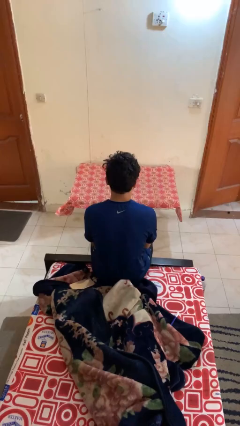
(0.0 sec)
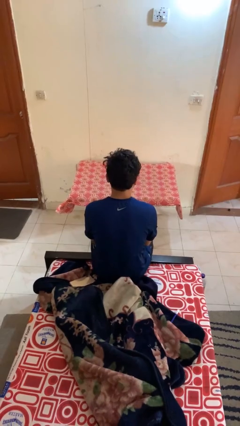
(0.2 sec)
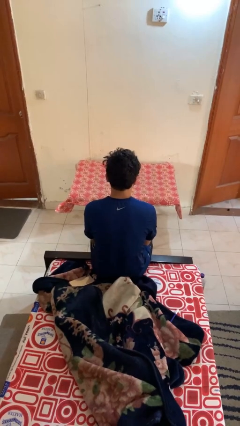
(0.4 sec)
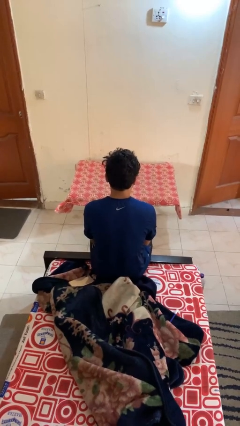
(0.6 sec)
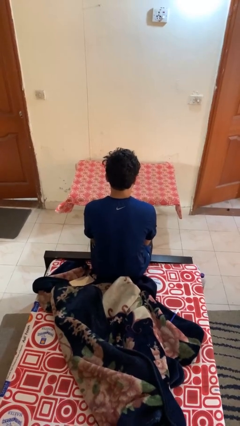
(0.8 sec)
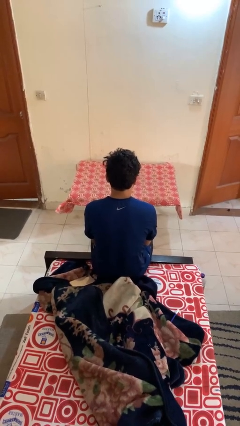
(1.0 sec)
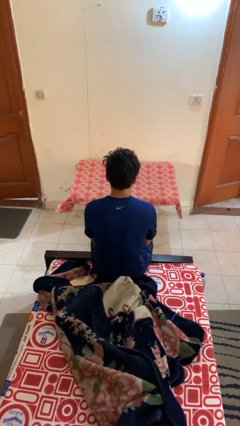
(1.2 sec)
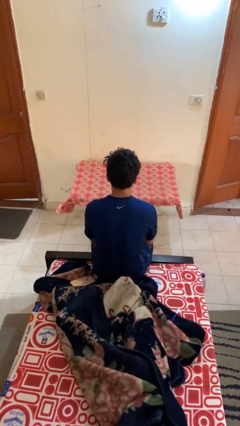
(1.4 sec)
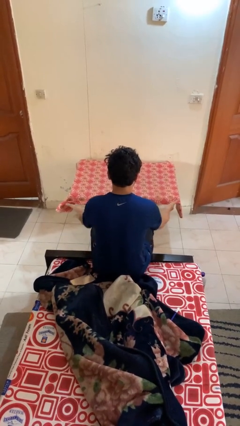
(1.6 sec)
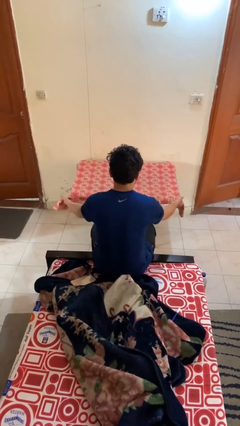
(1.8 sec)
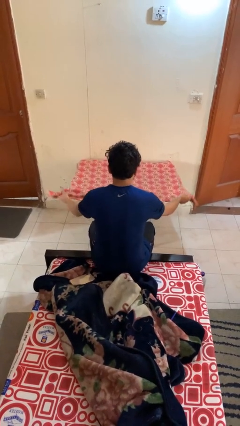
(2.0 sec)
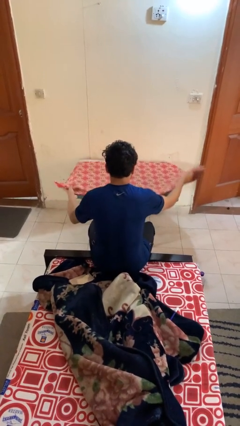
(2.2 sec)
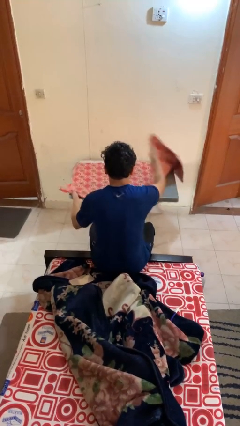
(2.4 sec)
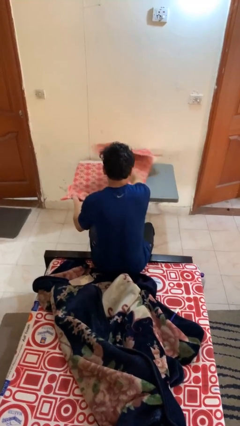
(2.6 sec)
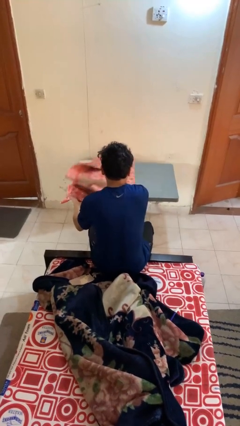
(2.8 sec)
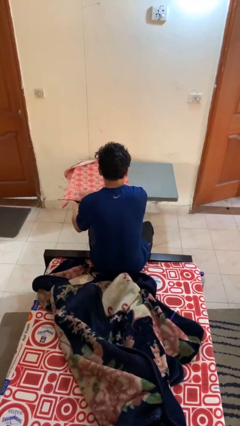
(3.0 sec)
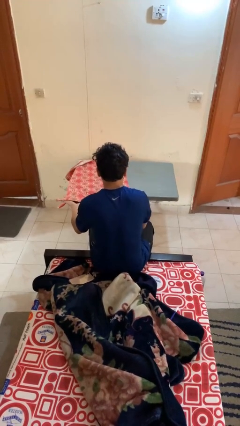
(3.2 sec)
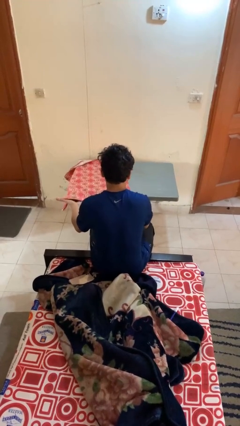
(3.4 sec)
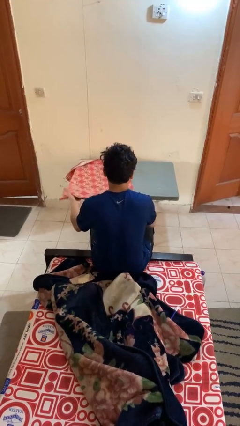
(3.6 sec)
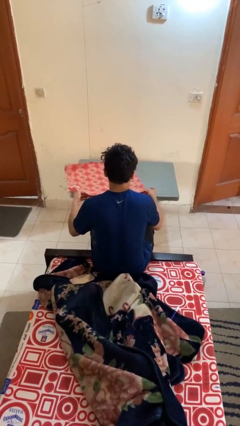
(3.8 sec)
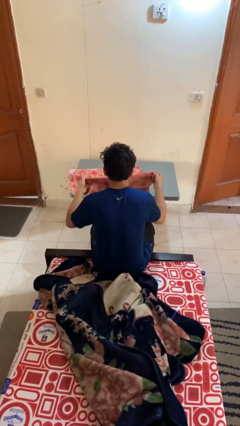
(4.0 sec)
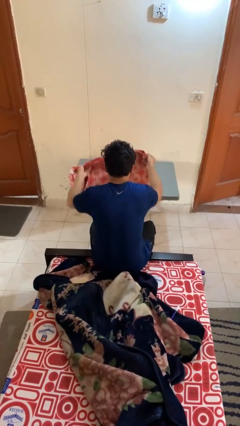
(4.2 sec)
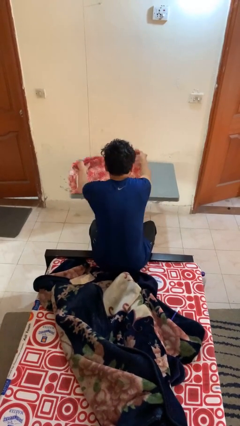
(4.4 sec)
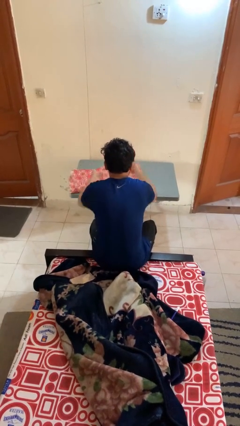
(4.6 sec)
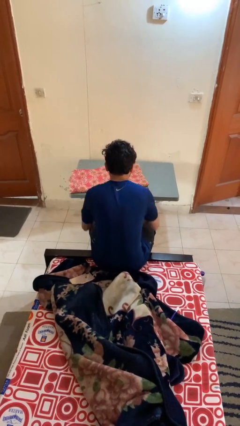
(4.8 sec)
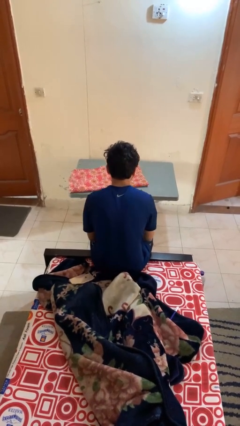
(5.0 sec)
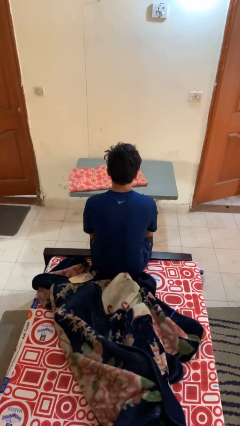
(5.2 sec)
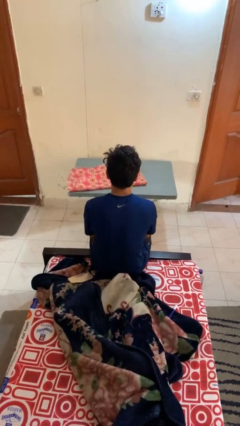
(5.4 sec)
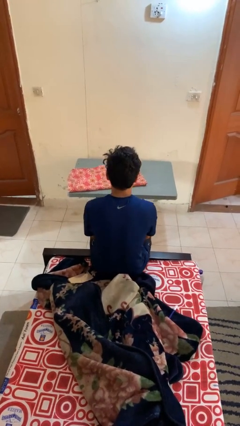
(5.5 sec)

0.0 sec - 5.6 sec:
person folds tablecloth

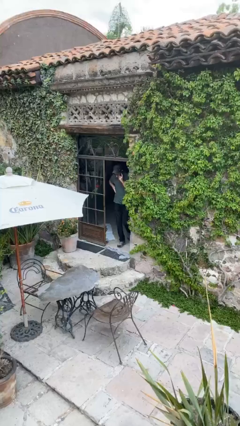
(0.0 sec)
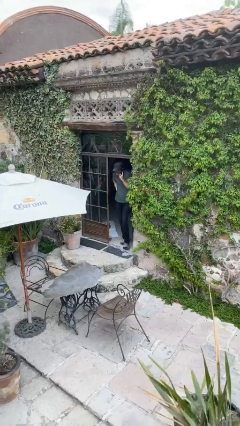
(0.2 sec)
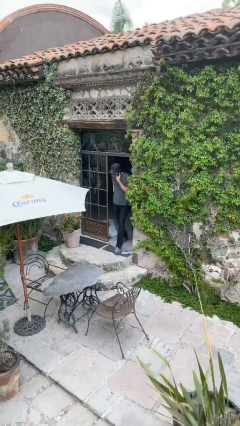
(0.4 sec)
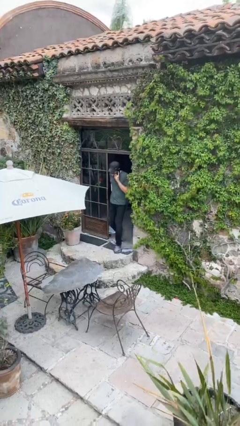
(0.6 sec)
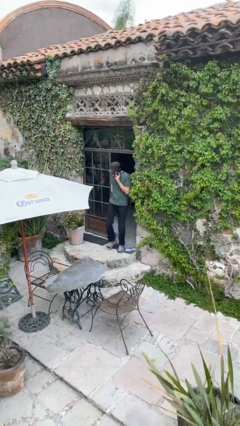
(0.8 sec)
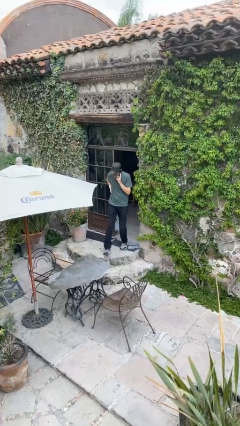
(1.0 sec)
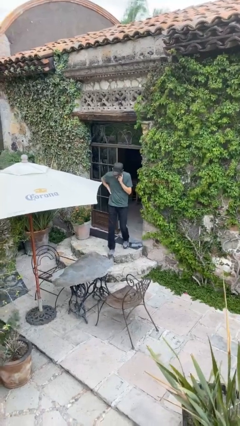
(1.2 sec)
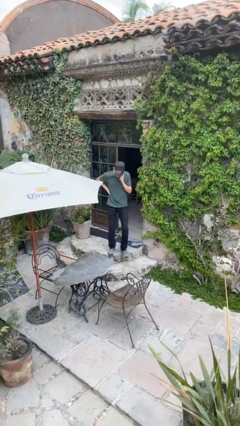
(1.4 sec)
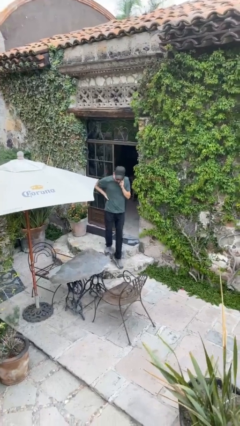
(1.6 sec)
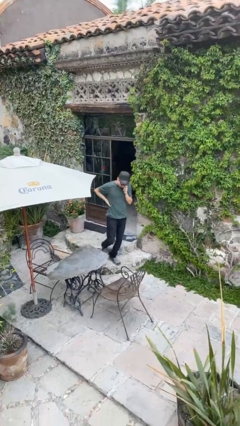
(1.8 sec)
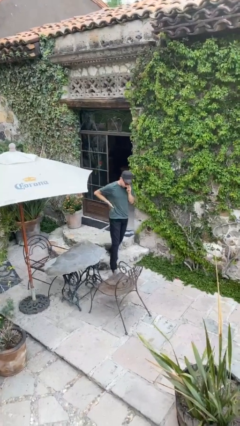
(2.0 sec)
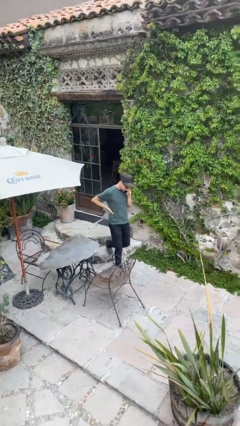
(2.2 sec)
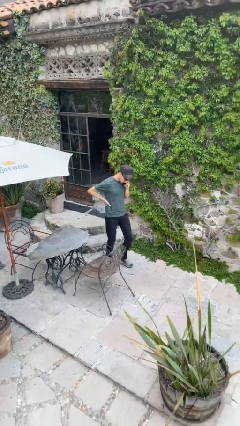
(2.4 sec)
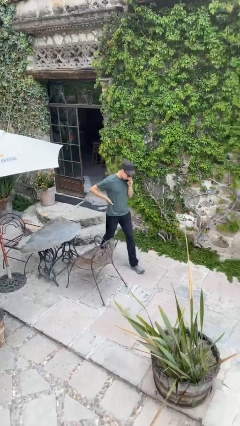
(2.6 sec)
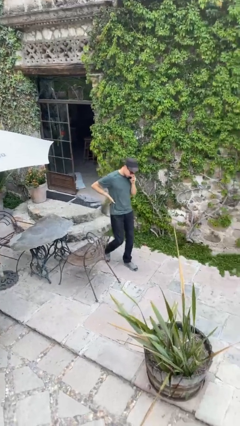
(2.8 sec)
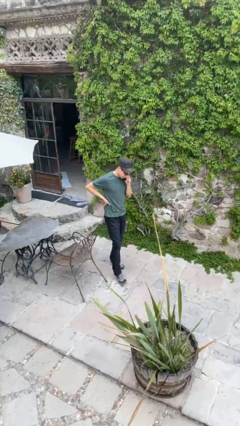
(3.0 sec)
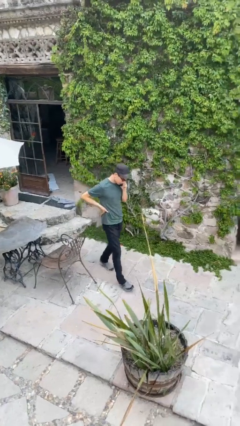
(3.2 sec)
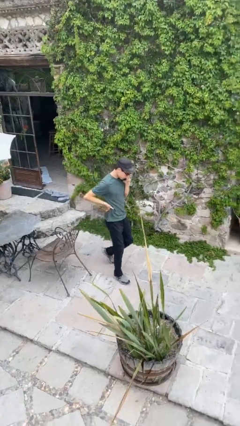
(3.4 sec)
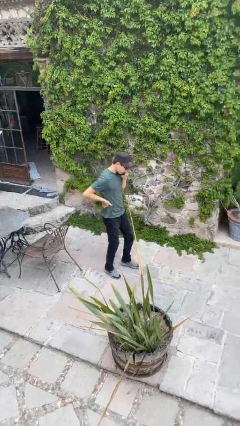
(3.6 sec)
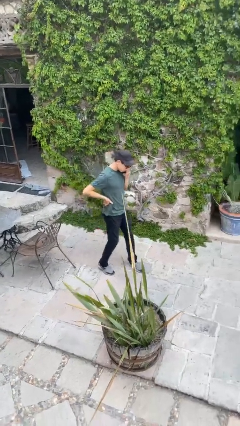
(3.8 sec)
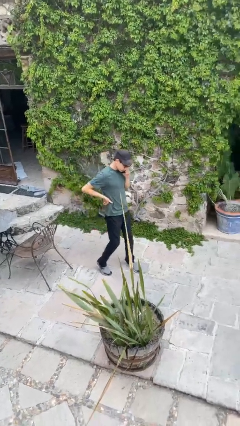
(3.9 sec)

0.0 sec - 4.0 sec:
person enters scene through structure

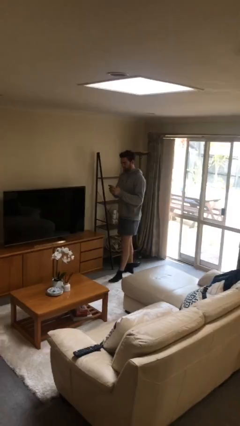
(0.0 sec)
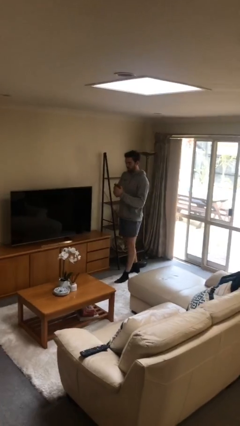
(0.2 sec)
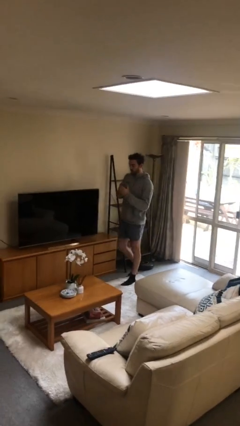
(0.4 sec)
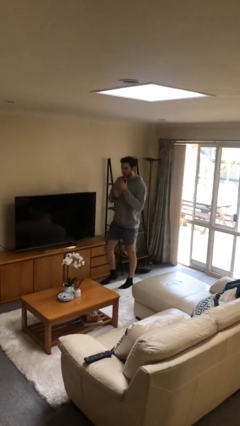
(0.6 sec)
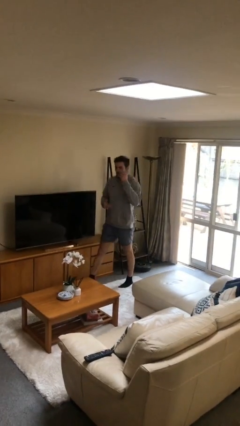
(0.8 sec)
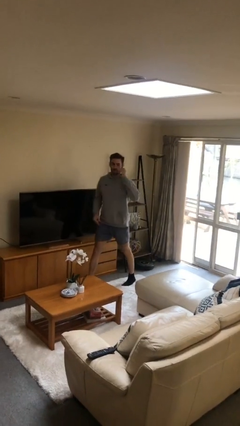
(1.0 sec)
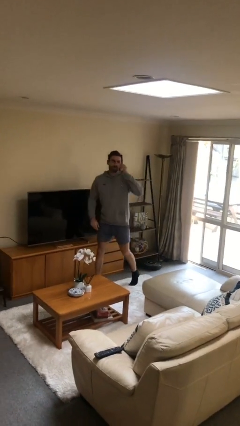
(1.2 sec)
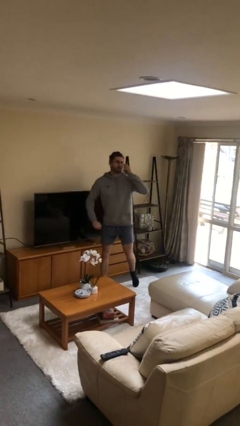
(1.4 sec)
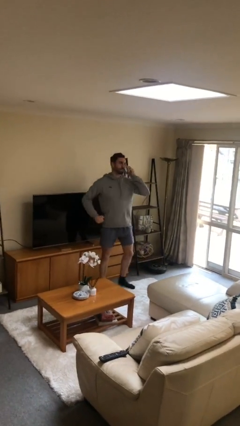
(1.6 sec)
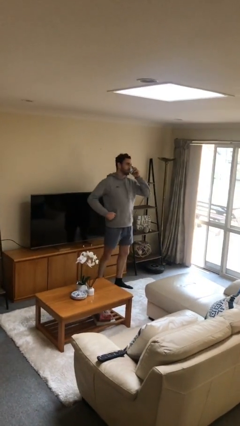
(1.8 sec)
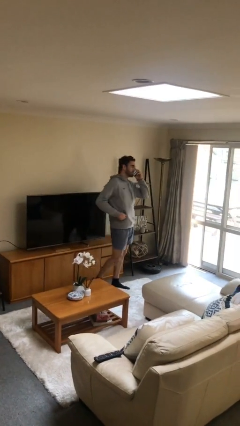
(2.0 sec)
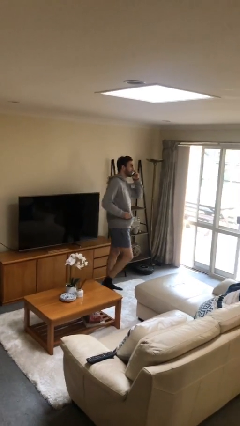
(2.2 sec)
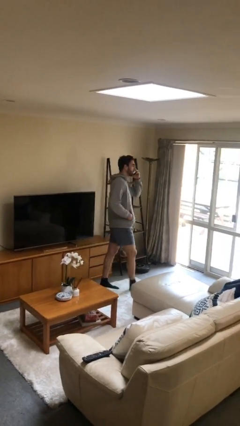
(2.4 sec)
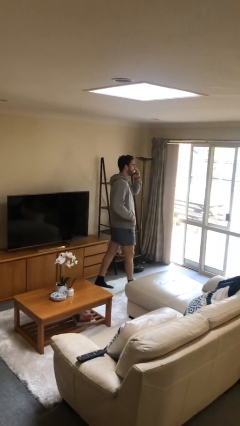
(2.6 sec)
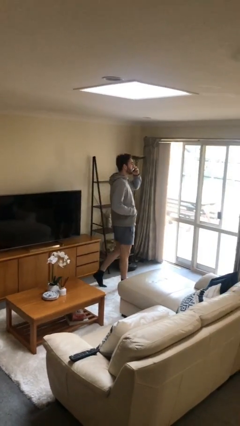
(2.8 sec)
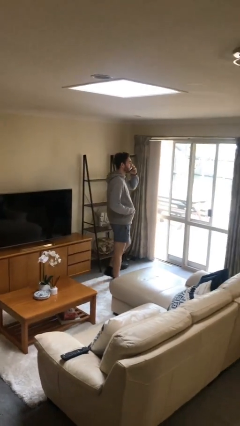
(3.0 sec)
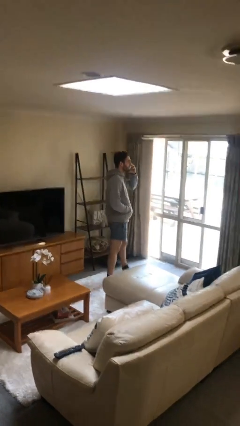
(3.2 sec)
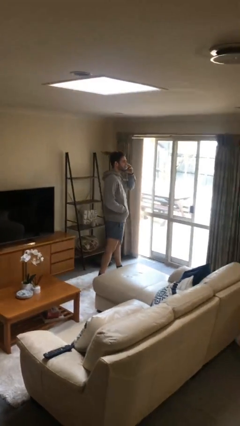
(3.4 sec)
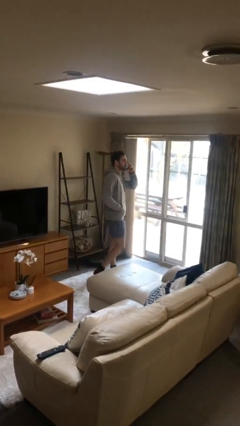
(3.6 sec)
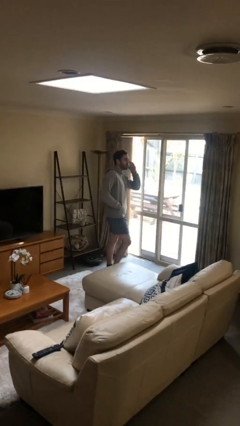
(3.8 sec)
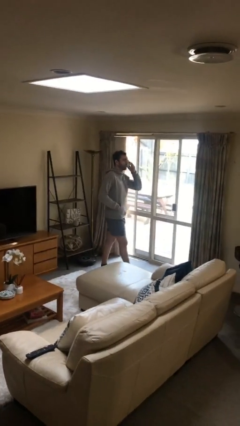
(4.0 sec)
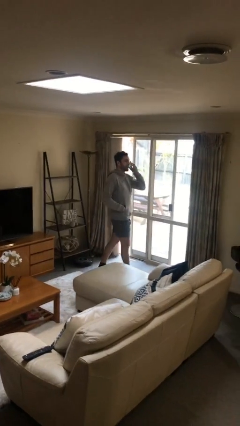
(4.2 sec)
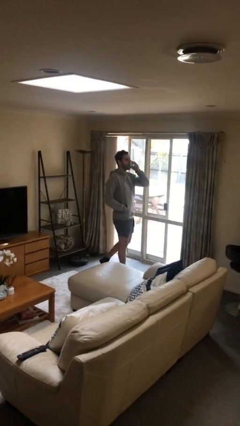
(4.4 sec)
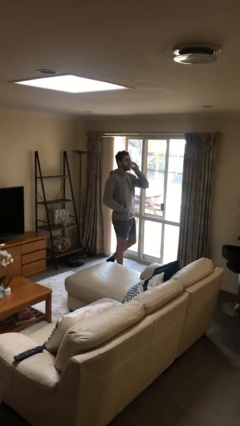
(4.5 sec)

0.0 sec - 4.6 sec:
person talks on phone

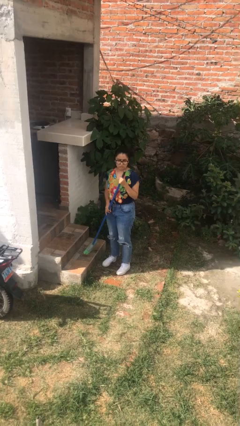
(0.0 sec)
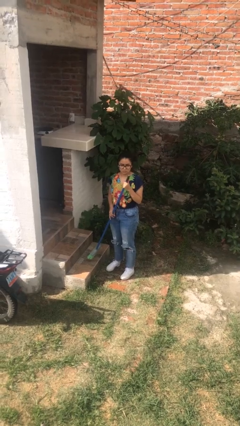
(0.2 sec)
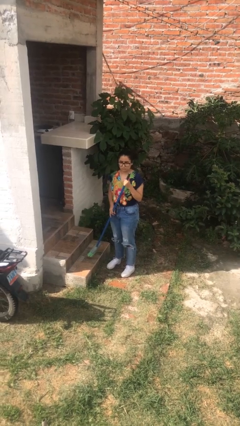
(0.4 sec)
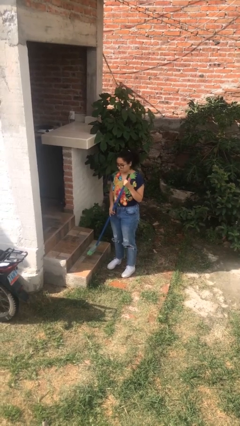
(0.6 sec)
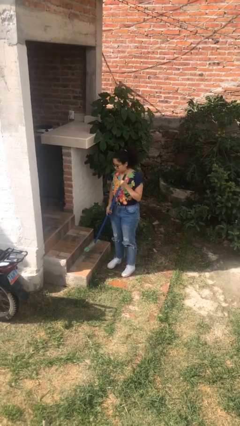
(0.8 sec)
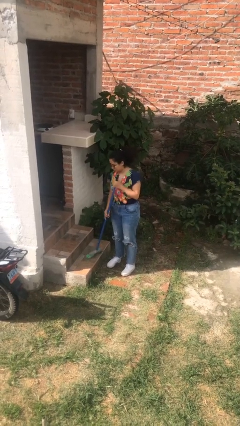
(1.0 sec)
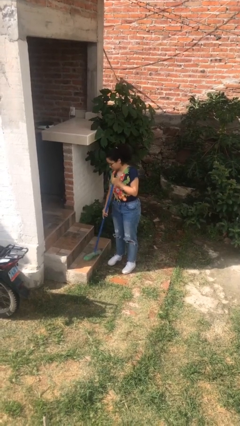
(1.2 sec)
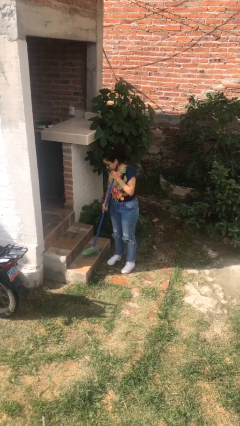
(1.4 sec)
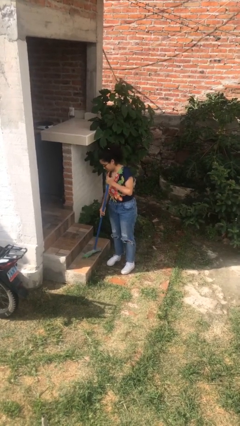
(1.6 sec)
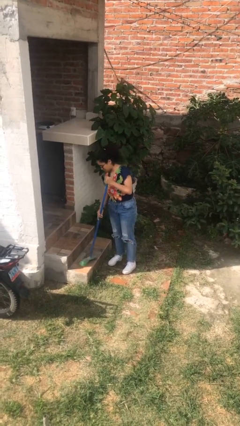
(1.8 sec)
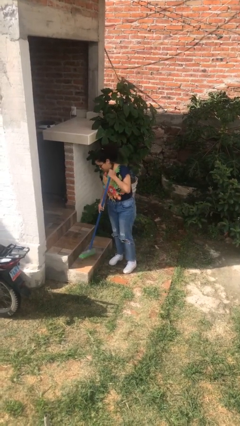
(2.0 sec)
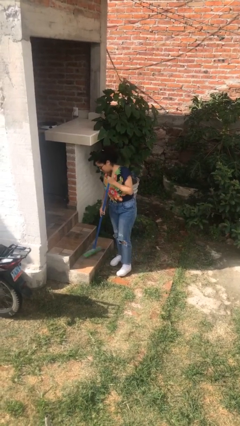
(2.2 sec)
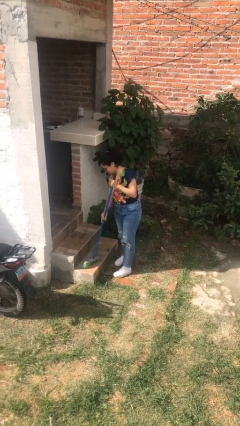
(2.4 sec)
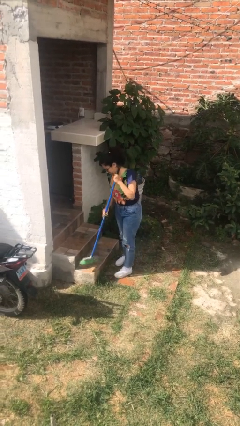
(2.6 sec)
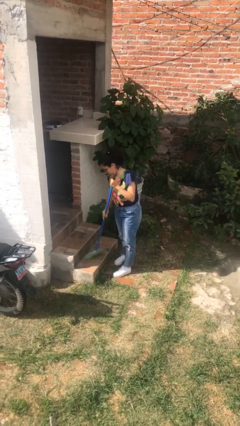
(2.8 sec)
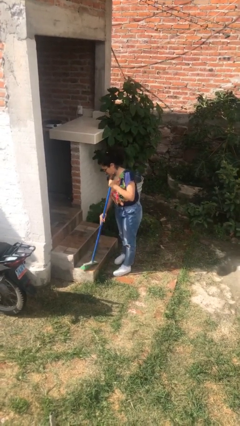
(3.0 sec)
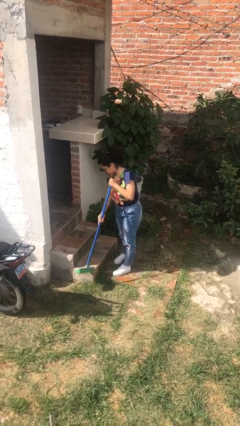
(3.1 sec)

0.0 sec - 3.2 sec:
person sweeps floor
